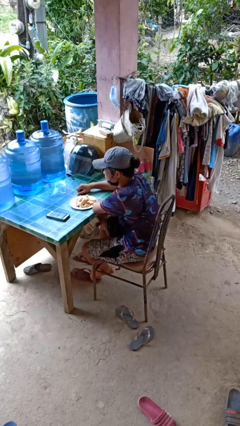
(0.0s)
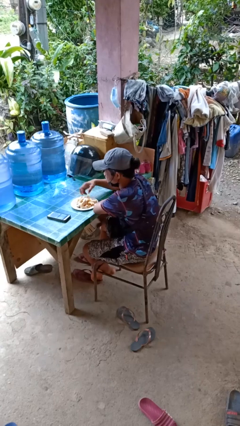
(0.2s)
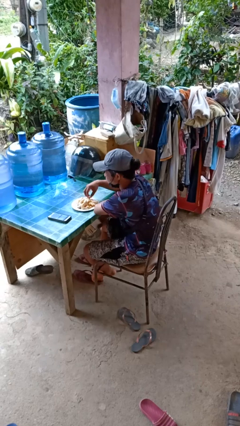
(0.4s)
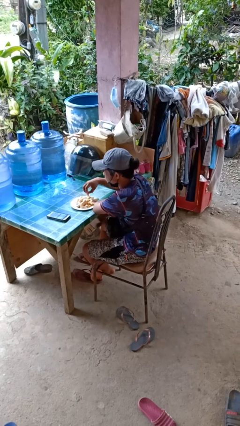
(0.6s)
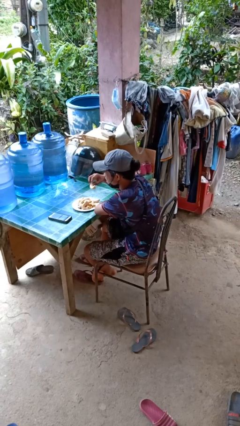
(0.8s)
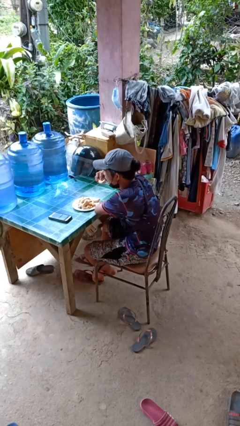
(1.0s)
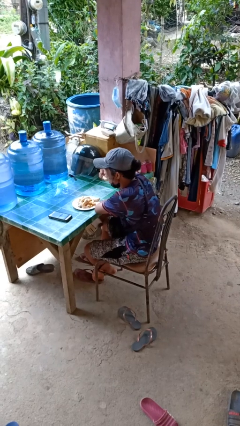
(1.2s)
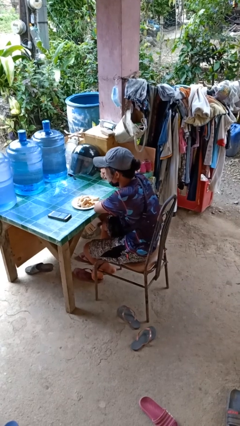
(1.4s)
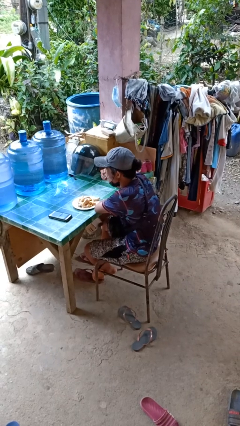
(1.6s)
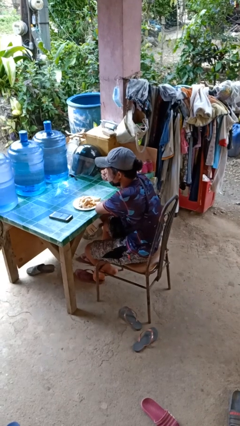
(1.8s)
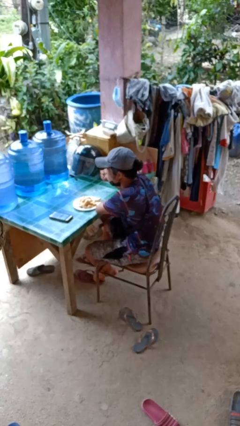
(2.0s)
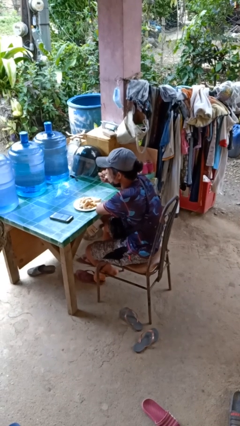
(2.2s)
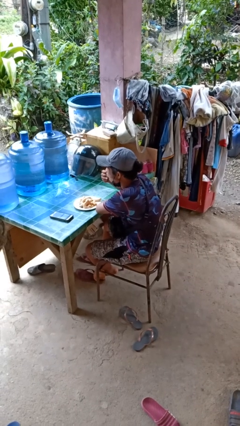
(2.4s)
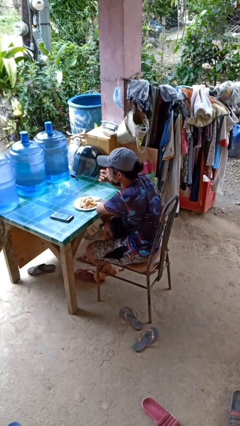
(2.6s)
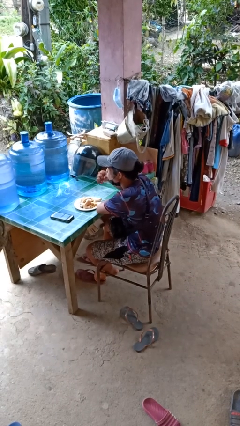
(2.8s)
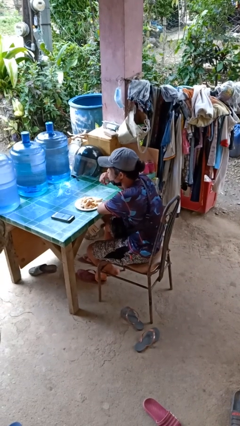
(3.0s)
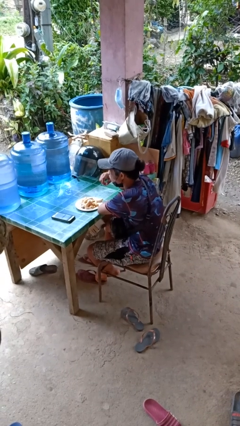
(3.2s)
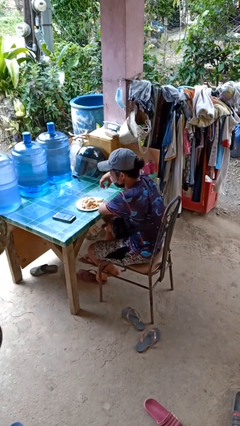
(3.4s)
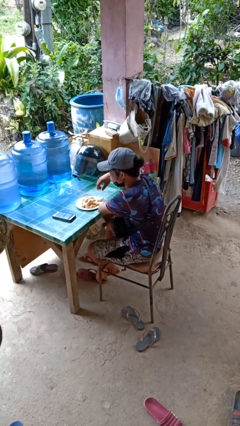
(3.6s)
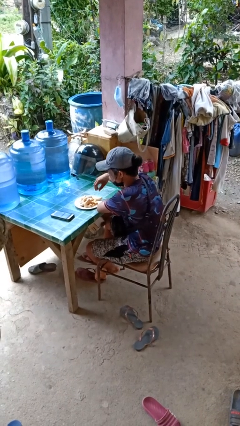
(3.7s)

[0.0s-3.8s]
person eats with hands

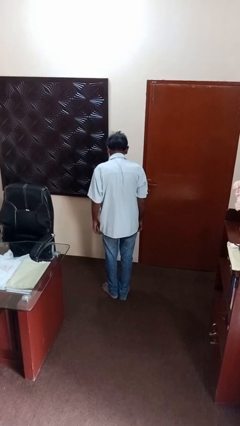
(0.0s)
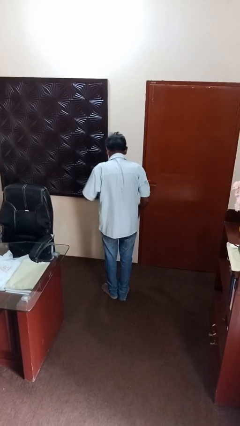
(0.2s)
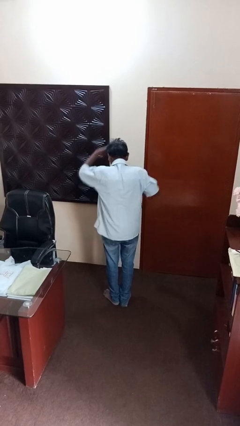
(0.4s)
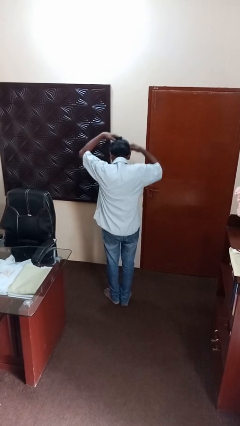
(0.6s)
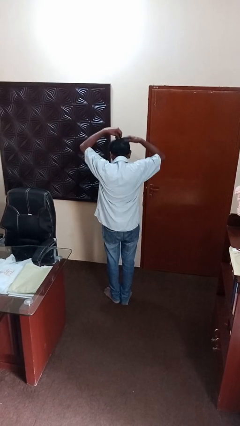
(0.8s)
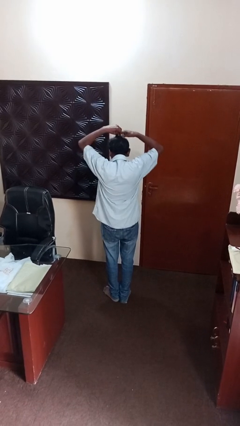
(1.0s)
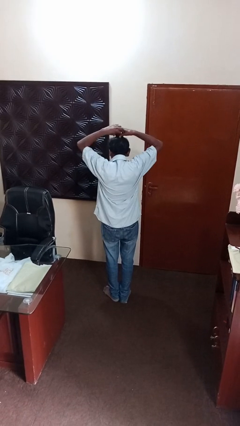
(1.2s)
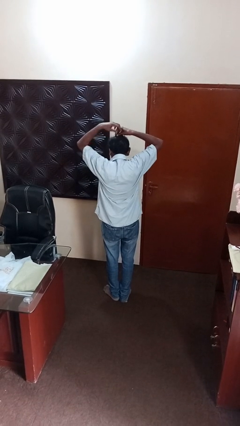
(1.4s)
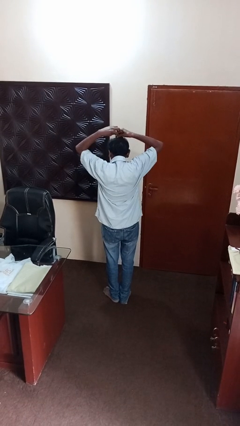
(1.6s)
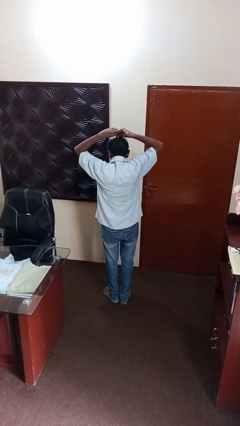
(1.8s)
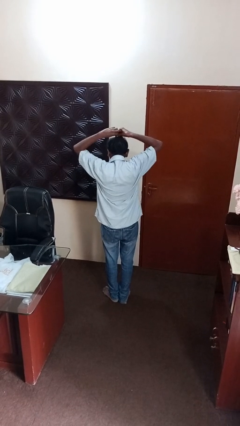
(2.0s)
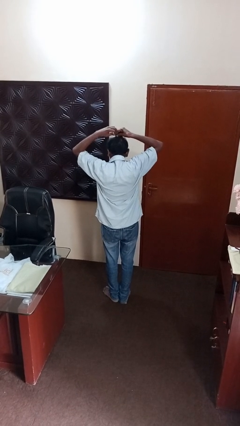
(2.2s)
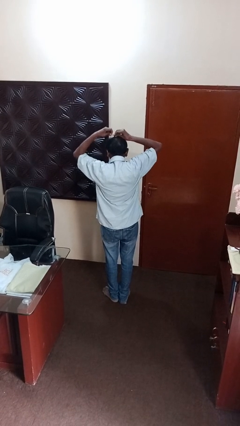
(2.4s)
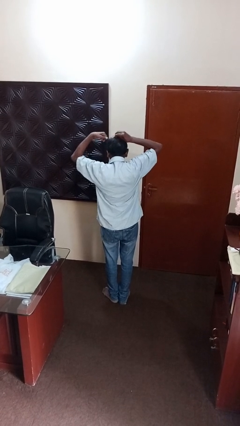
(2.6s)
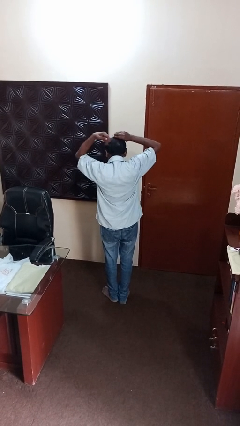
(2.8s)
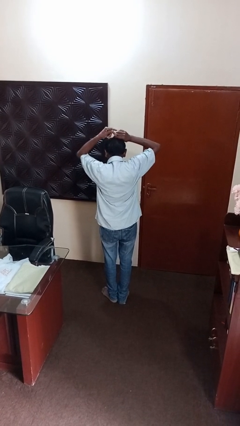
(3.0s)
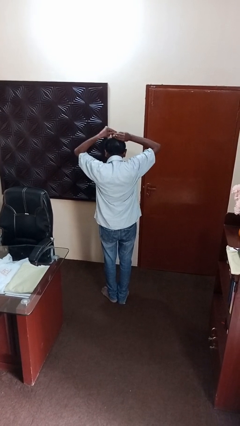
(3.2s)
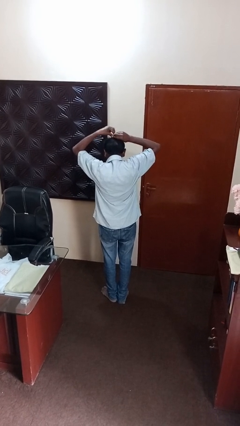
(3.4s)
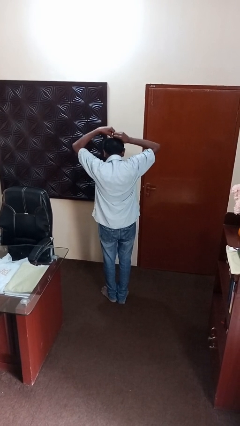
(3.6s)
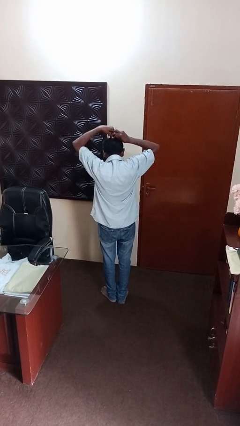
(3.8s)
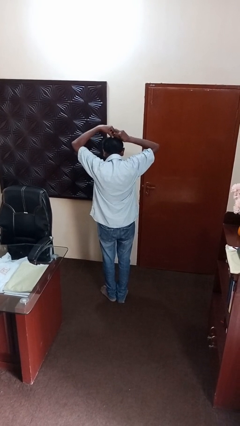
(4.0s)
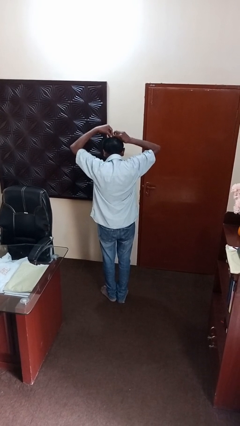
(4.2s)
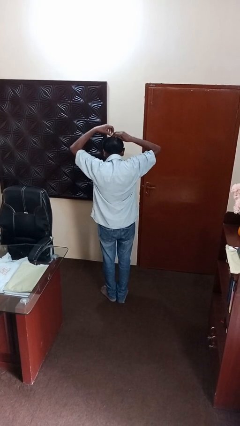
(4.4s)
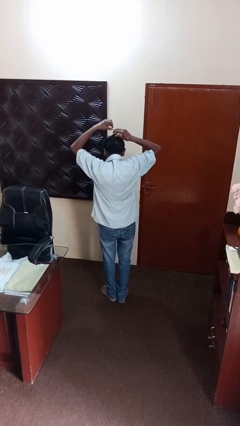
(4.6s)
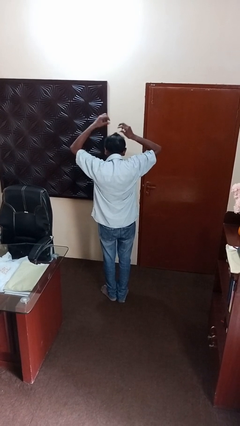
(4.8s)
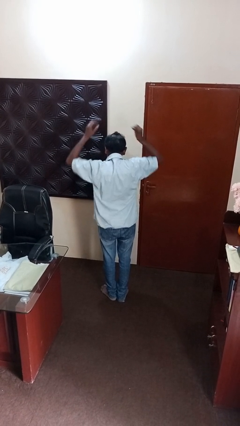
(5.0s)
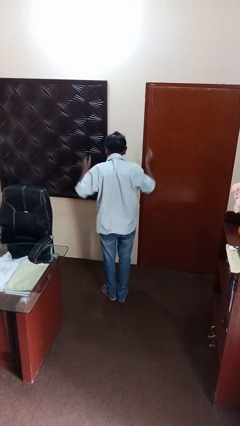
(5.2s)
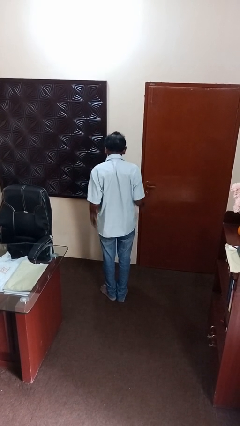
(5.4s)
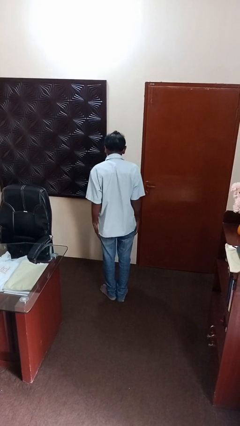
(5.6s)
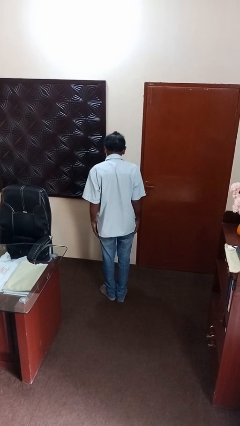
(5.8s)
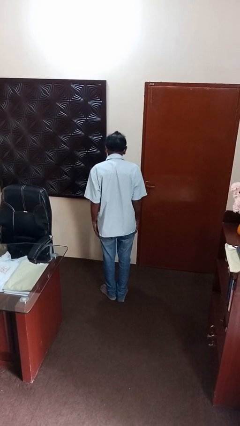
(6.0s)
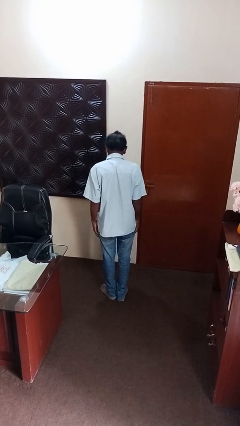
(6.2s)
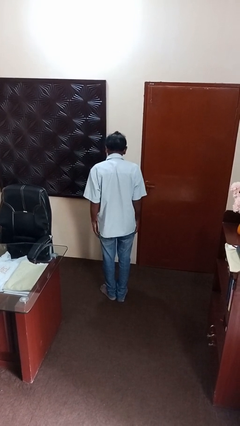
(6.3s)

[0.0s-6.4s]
person puts hair in ponytail

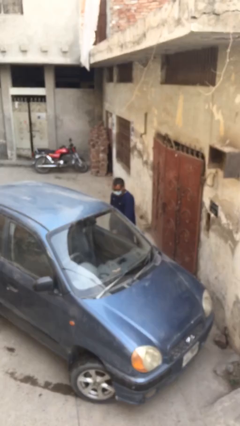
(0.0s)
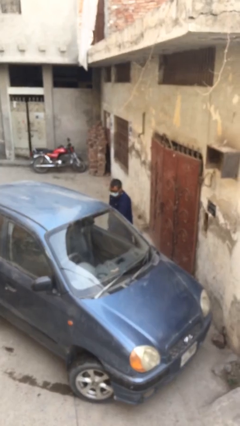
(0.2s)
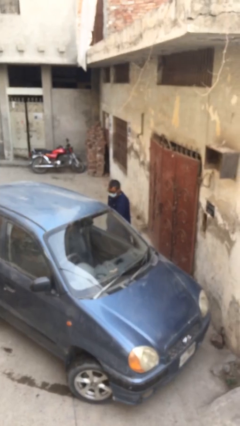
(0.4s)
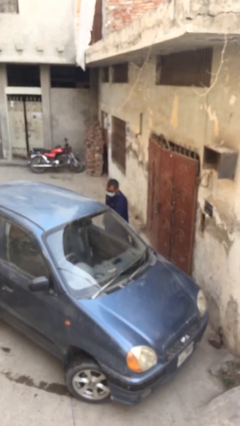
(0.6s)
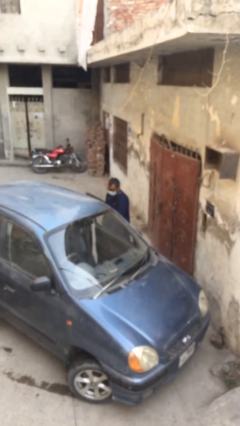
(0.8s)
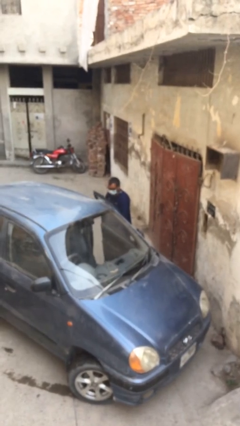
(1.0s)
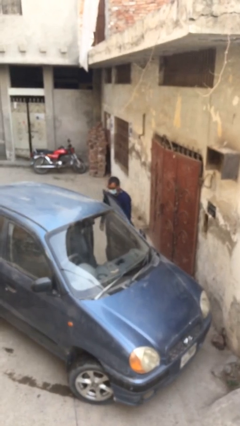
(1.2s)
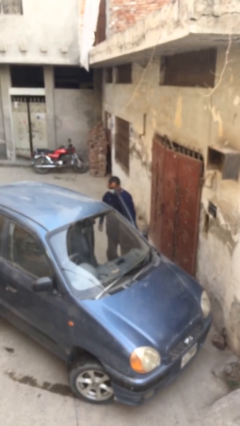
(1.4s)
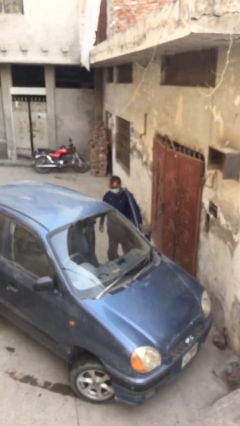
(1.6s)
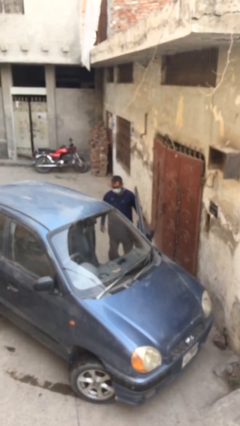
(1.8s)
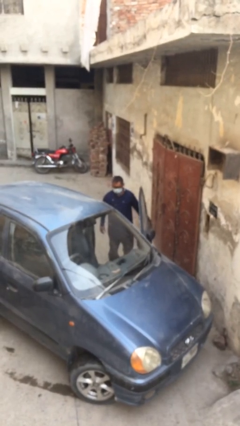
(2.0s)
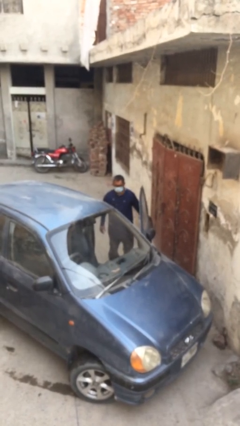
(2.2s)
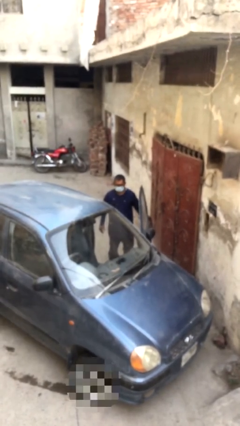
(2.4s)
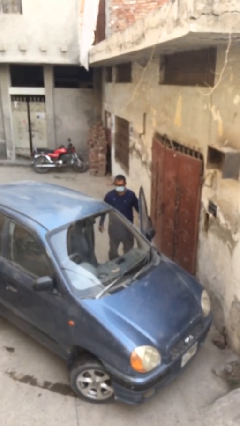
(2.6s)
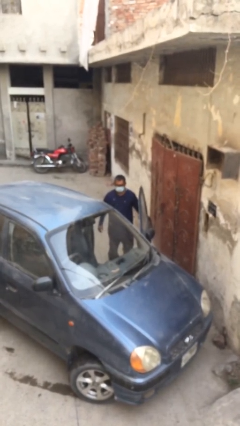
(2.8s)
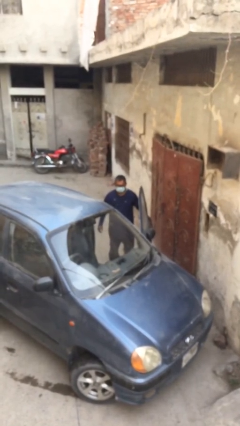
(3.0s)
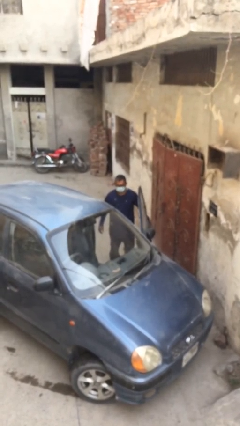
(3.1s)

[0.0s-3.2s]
person opens car door

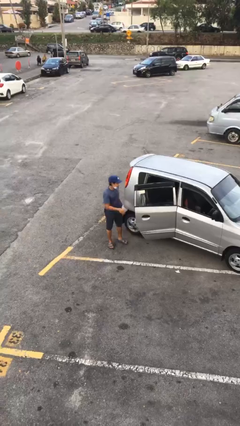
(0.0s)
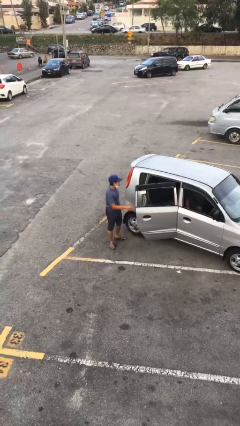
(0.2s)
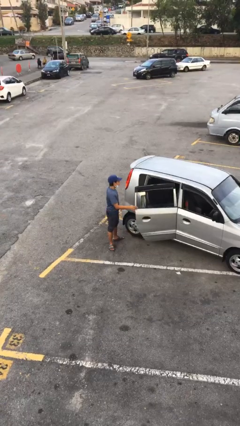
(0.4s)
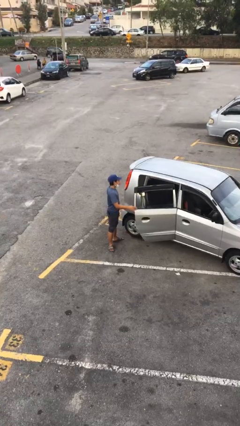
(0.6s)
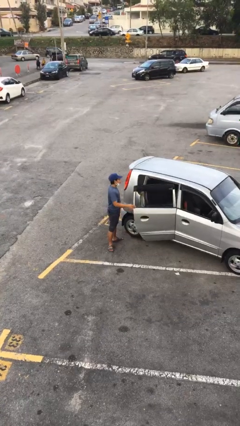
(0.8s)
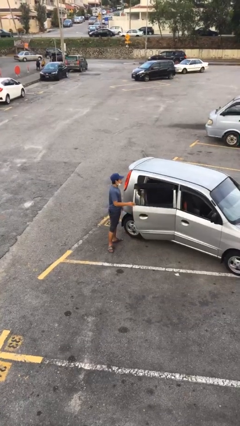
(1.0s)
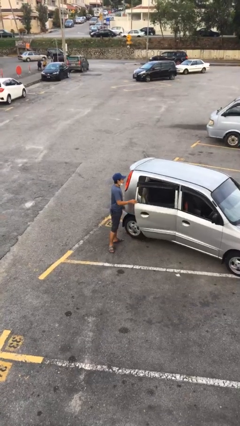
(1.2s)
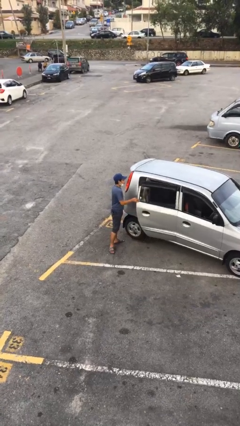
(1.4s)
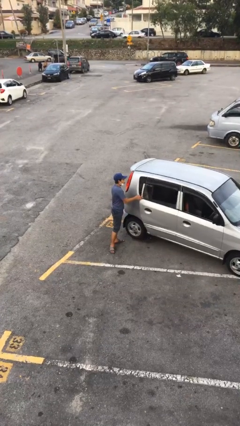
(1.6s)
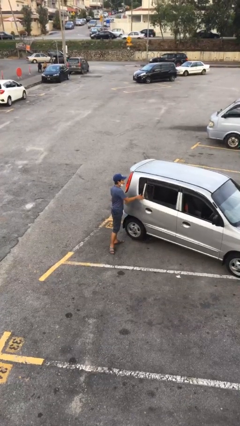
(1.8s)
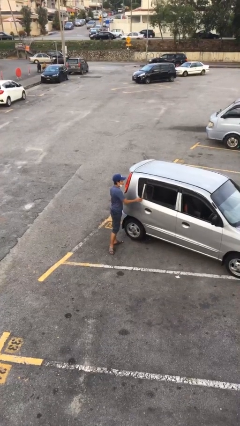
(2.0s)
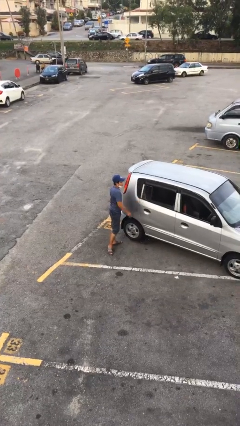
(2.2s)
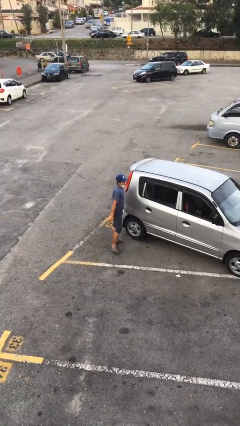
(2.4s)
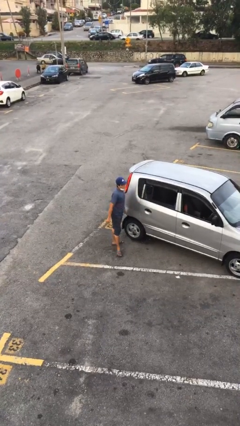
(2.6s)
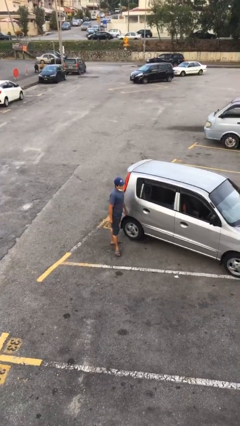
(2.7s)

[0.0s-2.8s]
person closes car door

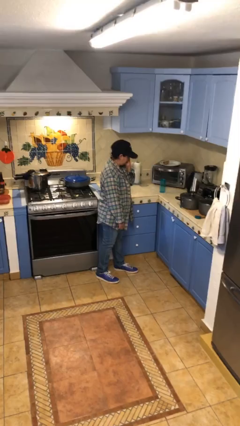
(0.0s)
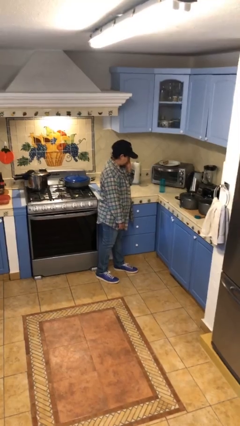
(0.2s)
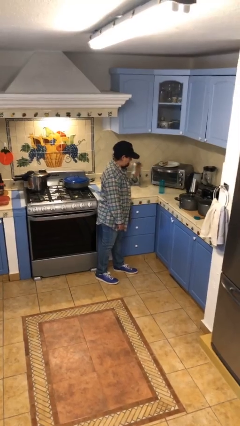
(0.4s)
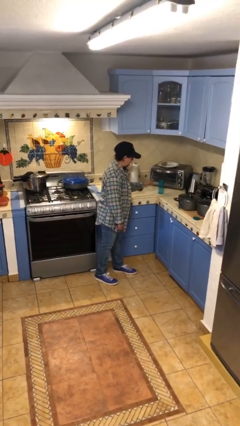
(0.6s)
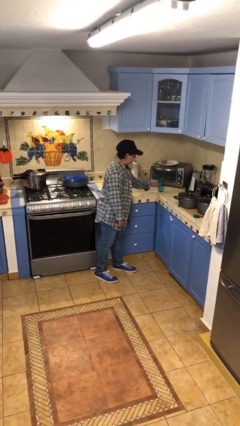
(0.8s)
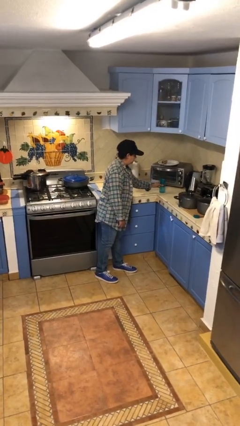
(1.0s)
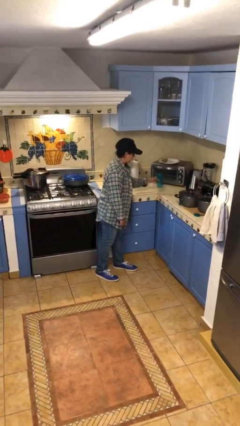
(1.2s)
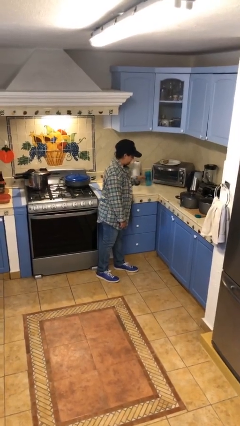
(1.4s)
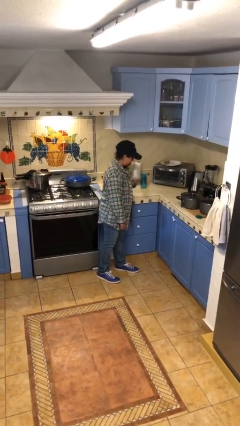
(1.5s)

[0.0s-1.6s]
person picks up object from countertop
